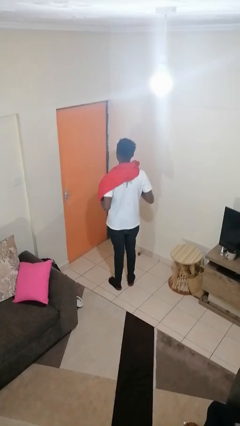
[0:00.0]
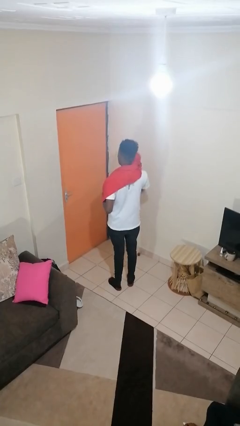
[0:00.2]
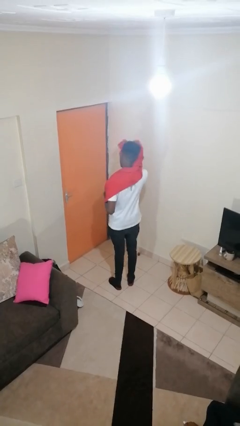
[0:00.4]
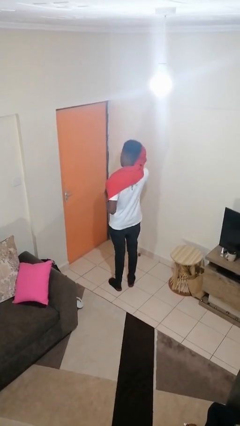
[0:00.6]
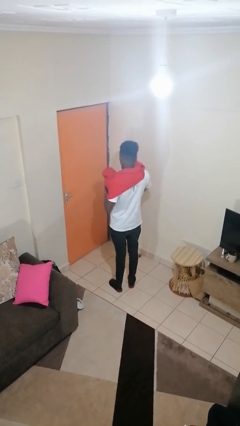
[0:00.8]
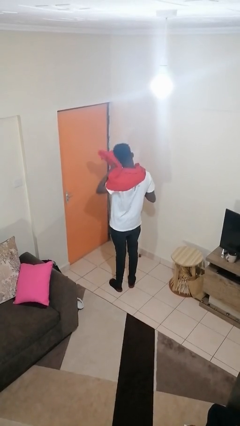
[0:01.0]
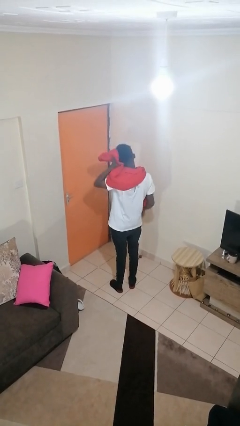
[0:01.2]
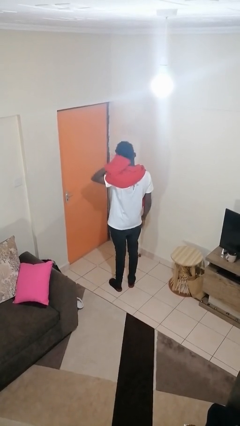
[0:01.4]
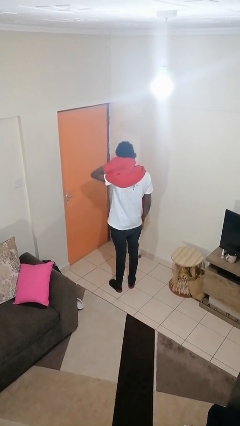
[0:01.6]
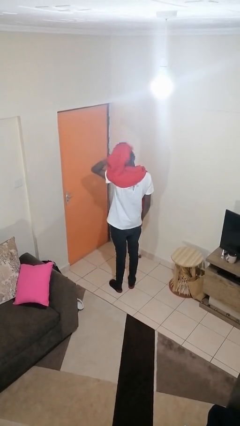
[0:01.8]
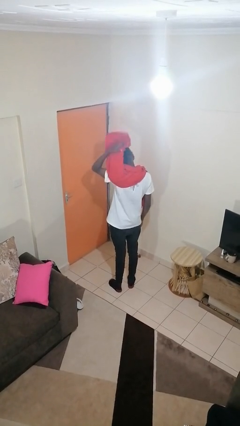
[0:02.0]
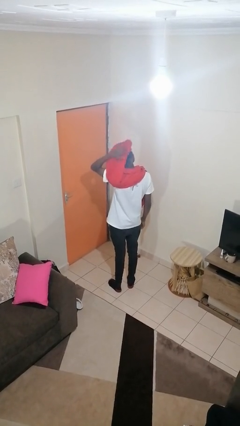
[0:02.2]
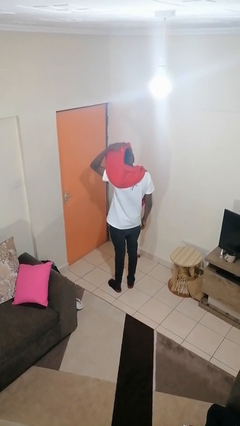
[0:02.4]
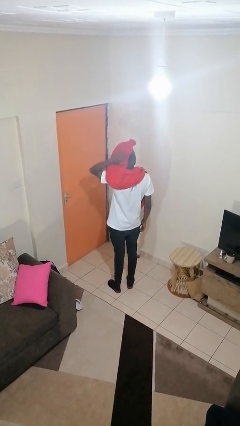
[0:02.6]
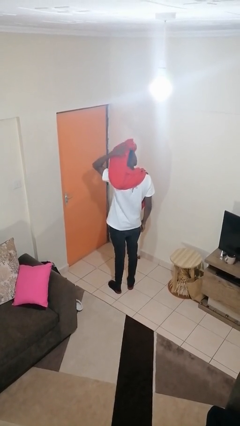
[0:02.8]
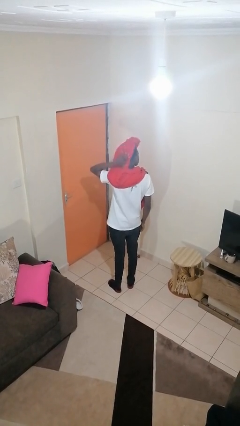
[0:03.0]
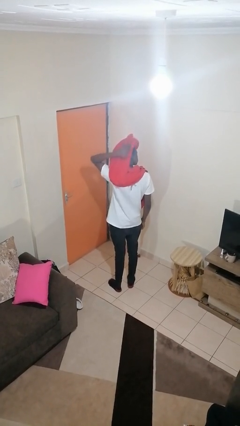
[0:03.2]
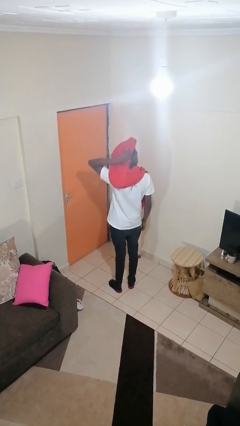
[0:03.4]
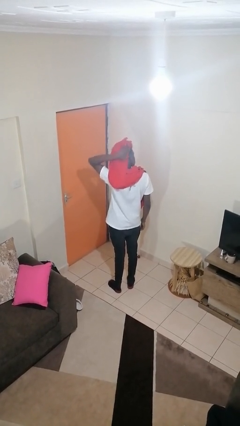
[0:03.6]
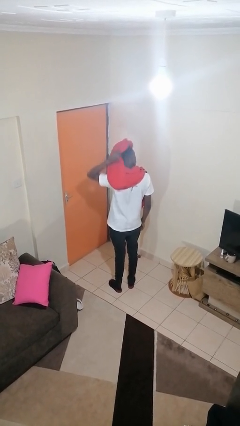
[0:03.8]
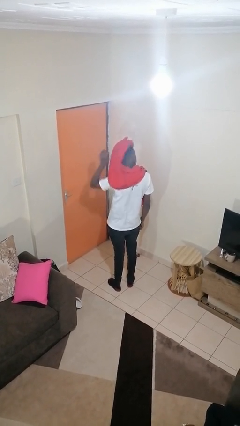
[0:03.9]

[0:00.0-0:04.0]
person dries hair with towel

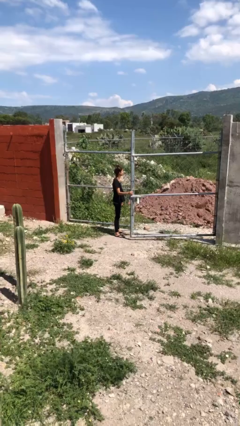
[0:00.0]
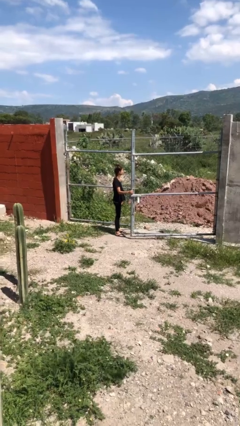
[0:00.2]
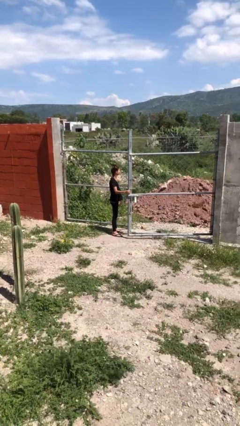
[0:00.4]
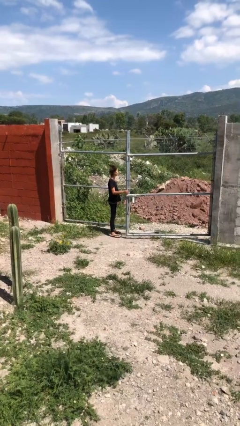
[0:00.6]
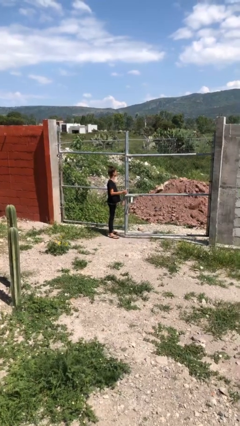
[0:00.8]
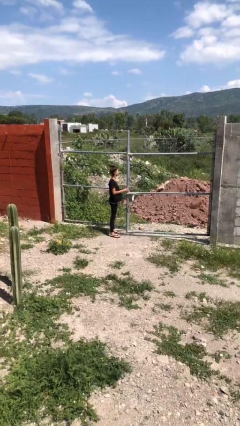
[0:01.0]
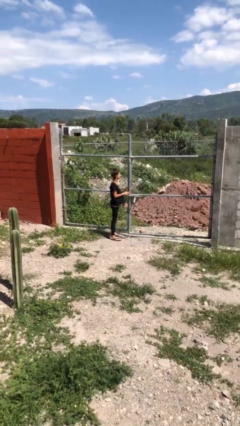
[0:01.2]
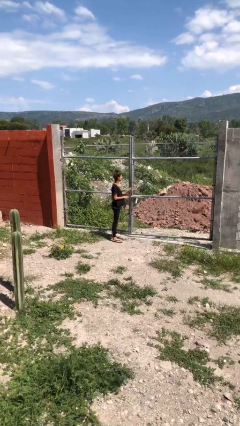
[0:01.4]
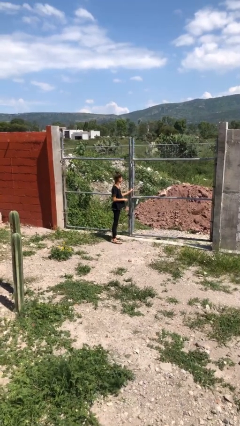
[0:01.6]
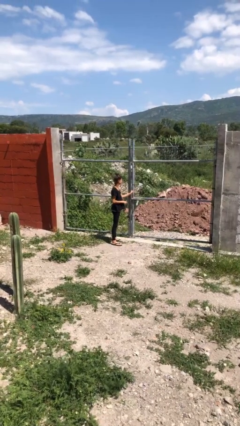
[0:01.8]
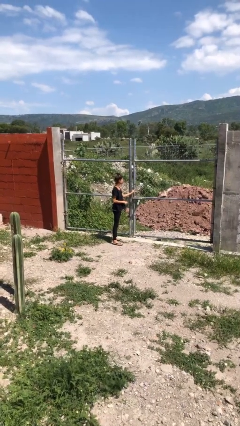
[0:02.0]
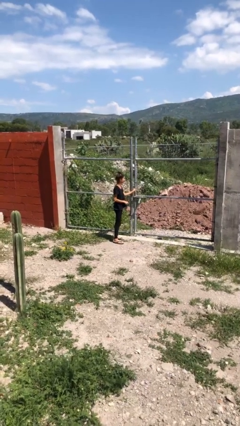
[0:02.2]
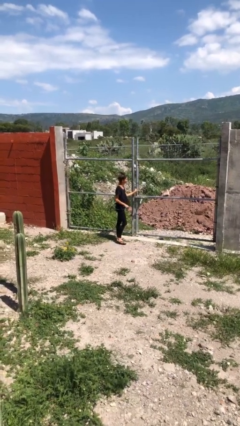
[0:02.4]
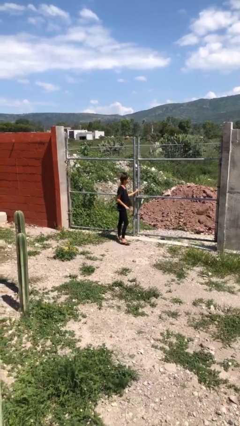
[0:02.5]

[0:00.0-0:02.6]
person closes gate

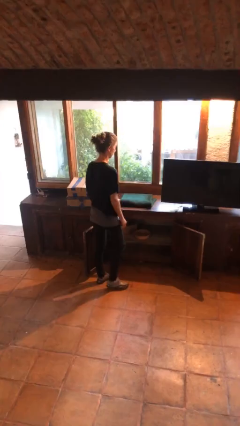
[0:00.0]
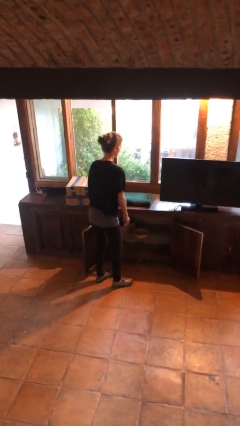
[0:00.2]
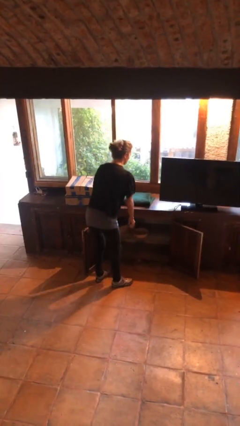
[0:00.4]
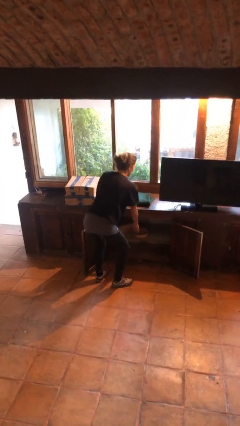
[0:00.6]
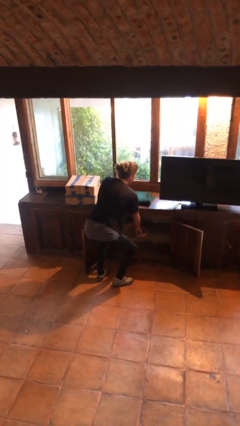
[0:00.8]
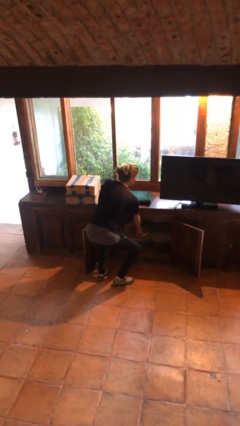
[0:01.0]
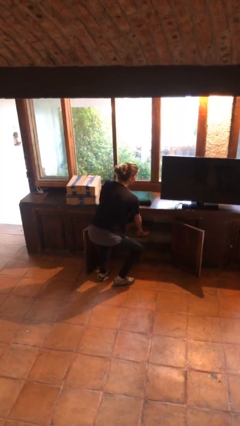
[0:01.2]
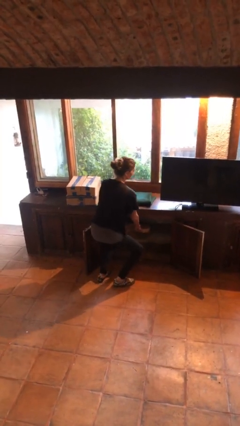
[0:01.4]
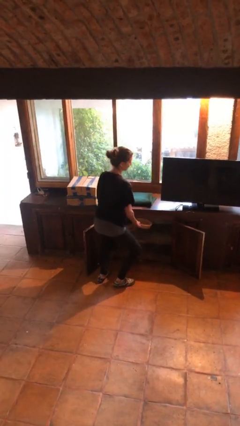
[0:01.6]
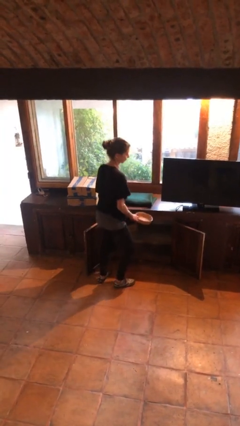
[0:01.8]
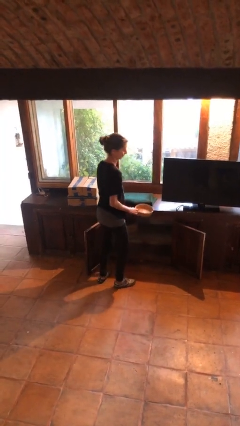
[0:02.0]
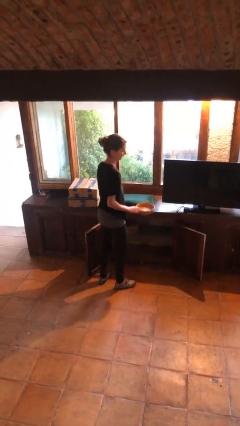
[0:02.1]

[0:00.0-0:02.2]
person picks up object from cabinet

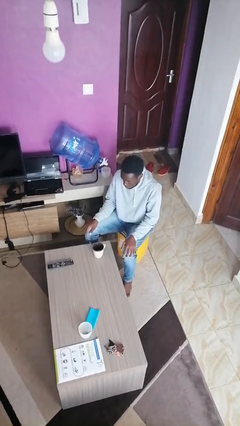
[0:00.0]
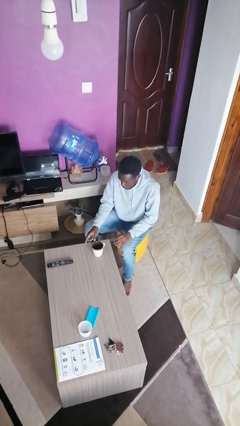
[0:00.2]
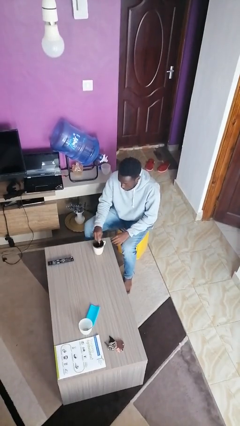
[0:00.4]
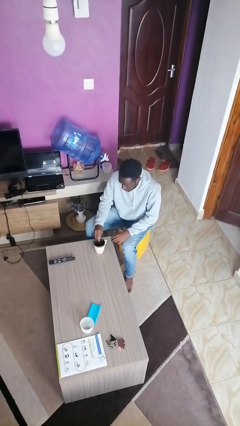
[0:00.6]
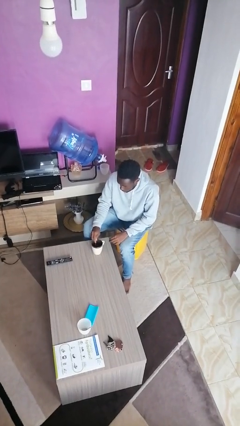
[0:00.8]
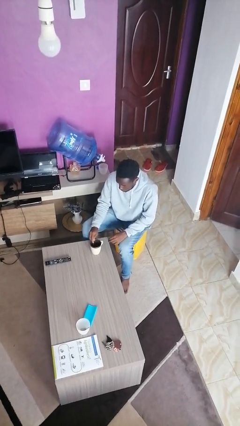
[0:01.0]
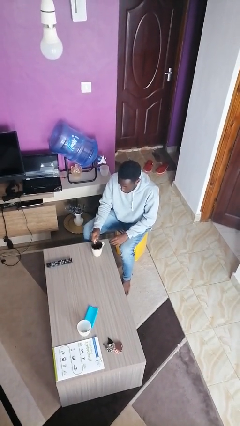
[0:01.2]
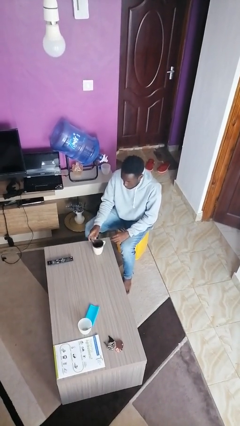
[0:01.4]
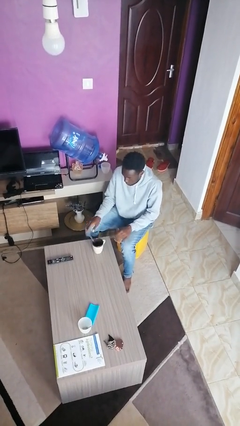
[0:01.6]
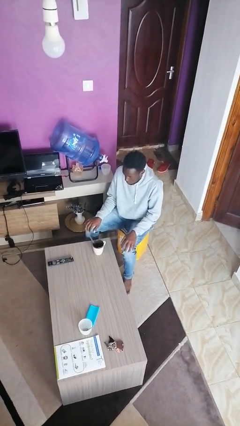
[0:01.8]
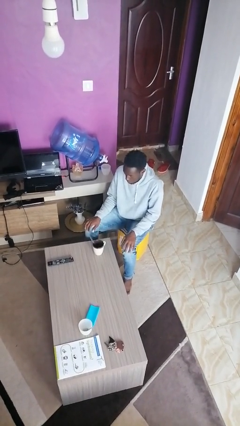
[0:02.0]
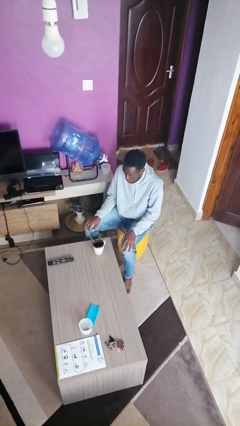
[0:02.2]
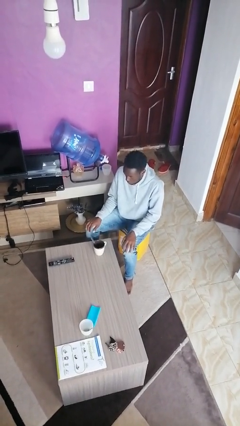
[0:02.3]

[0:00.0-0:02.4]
person stirs mug

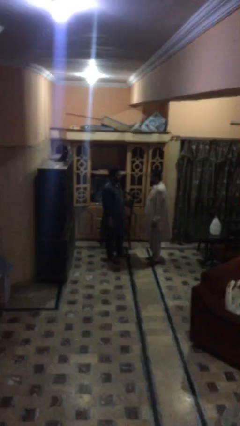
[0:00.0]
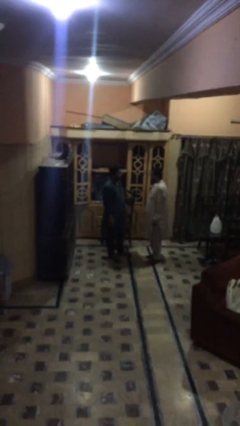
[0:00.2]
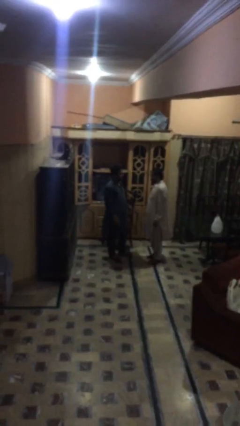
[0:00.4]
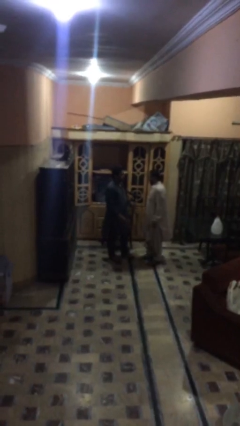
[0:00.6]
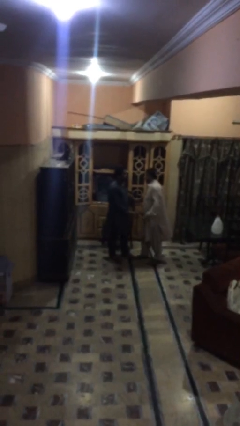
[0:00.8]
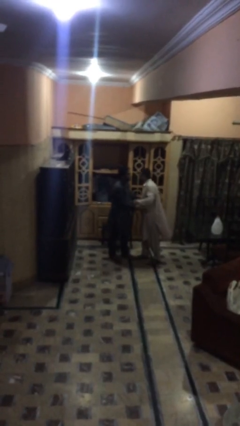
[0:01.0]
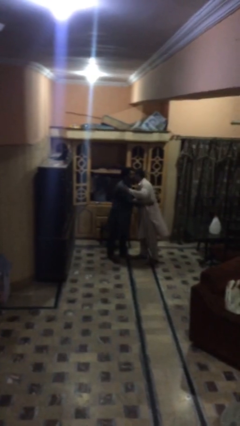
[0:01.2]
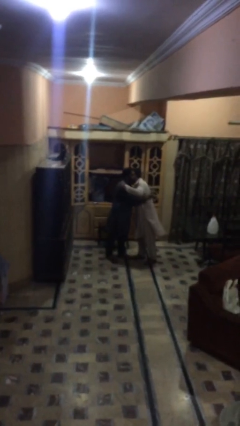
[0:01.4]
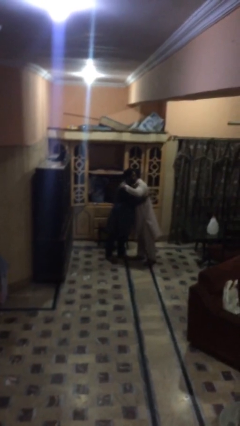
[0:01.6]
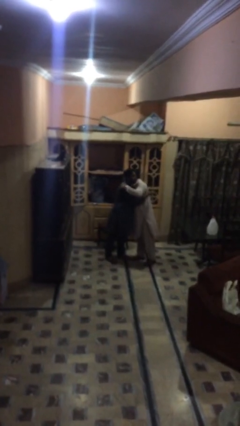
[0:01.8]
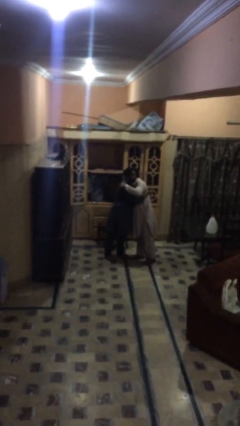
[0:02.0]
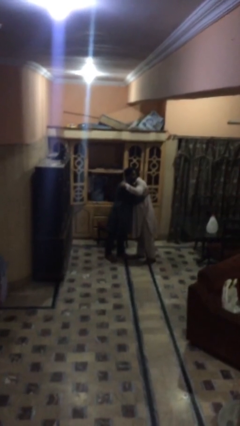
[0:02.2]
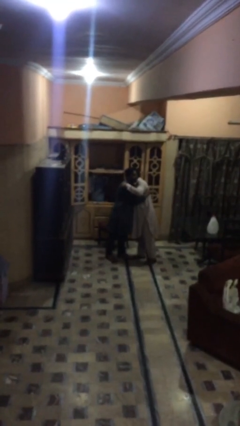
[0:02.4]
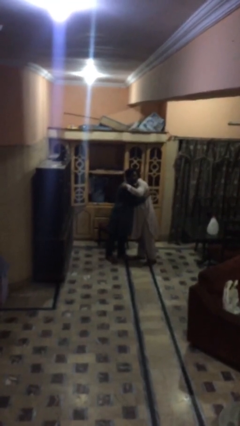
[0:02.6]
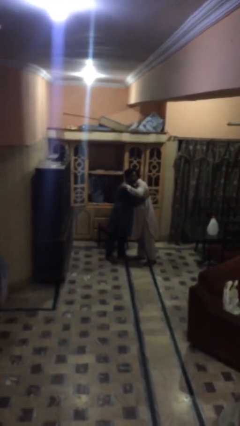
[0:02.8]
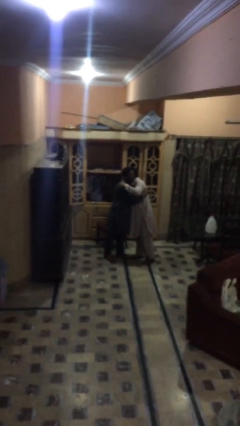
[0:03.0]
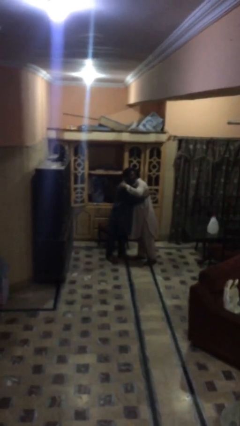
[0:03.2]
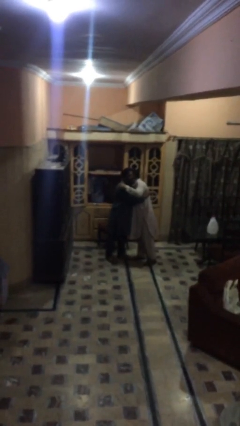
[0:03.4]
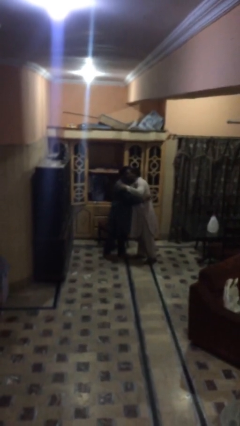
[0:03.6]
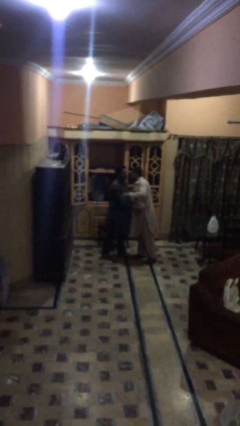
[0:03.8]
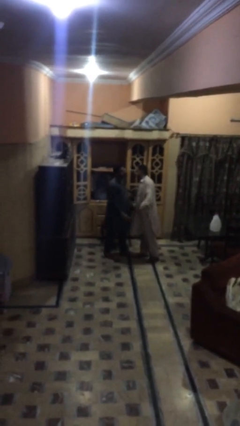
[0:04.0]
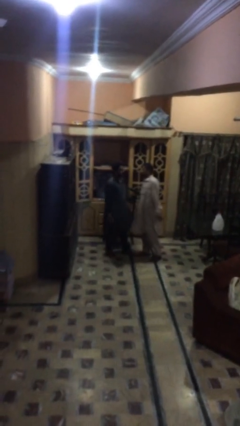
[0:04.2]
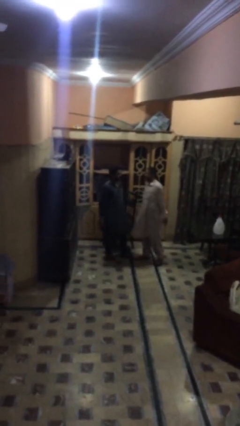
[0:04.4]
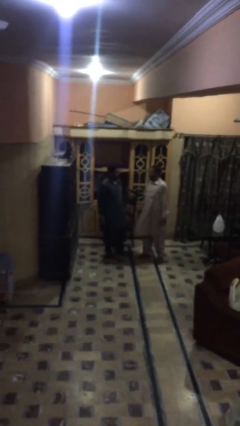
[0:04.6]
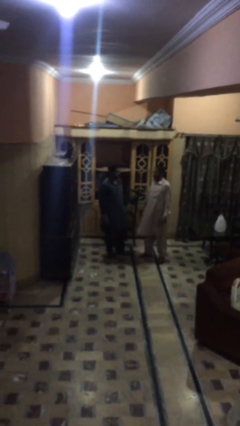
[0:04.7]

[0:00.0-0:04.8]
person embraces person

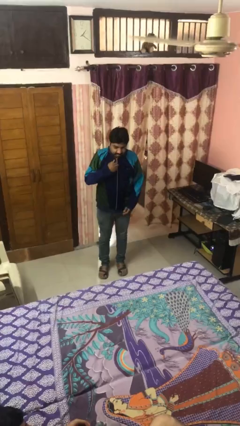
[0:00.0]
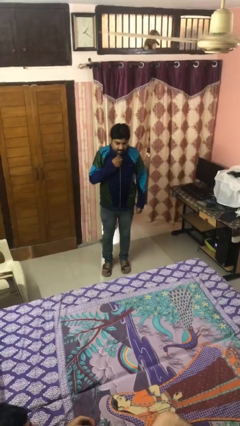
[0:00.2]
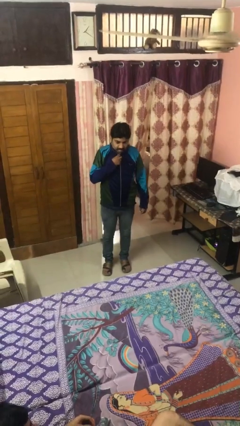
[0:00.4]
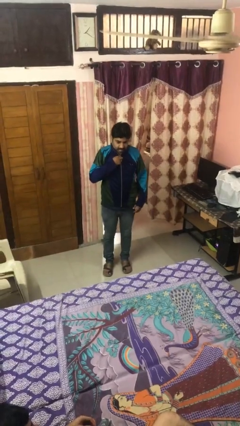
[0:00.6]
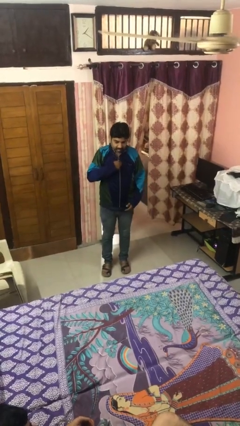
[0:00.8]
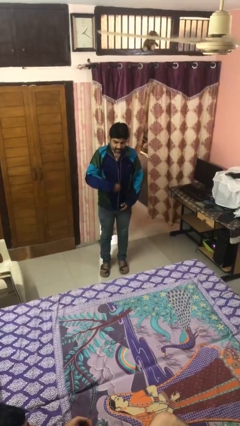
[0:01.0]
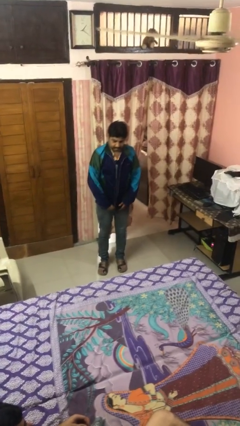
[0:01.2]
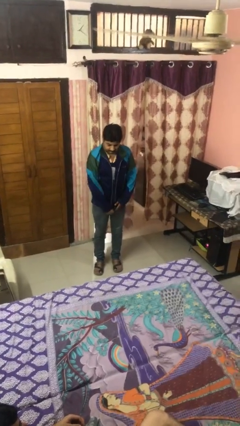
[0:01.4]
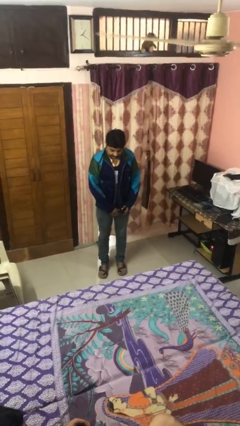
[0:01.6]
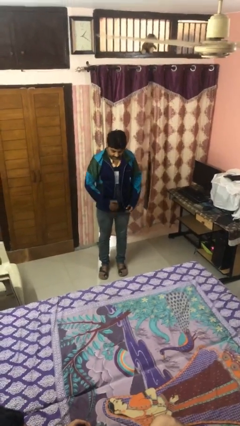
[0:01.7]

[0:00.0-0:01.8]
person unzips jacket
